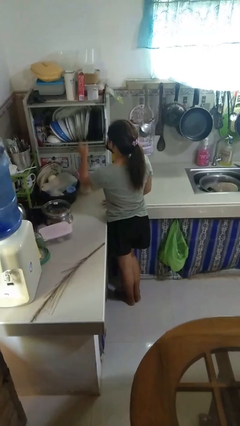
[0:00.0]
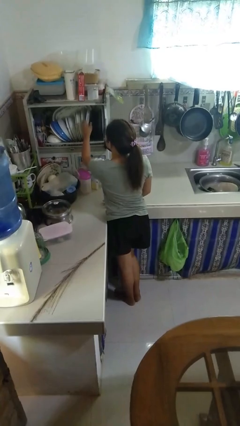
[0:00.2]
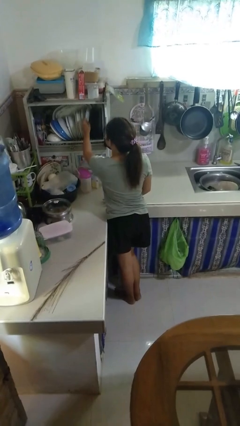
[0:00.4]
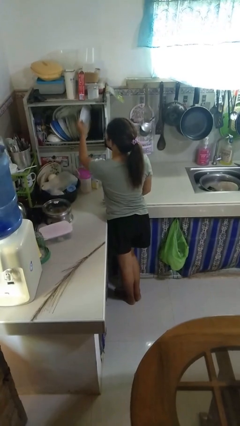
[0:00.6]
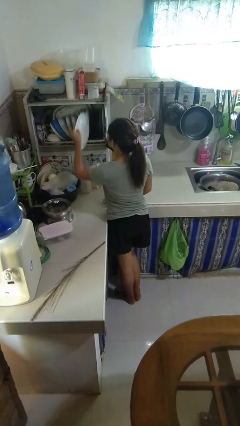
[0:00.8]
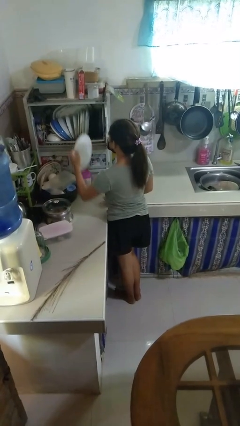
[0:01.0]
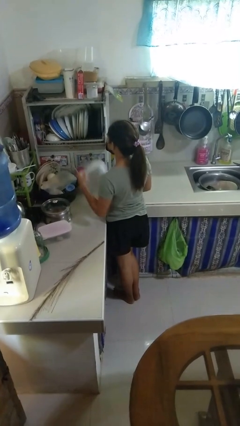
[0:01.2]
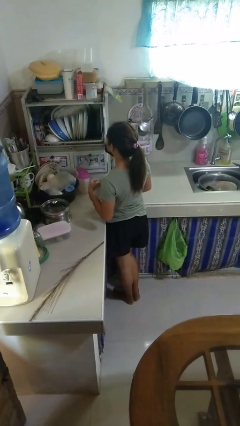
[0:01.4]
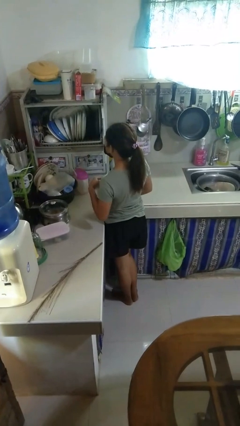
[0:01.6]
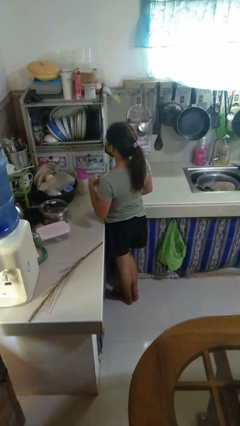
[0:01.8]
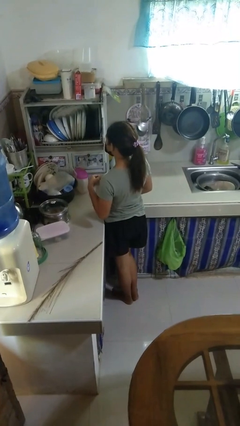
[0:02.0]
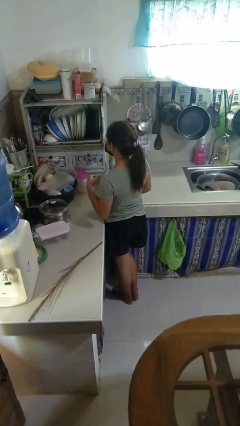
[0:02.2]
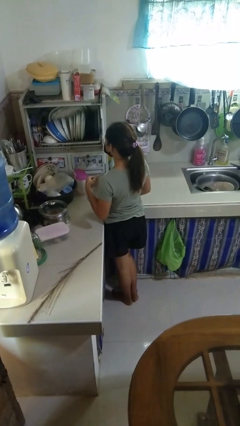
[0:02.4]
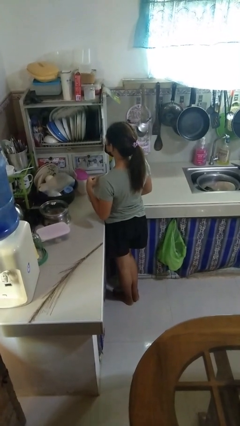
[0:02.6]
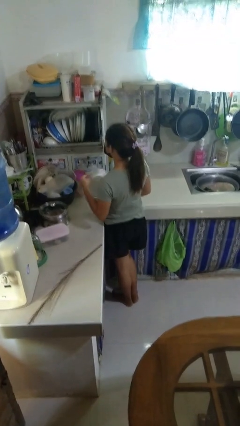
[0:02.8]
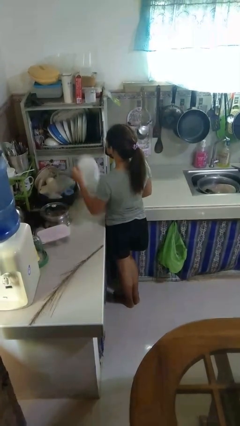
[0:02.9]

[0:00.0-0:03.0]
person takes object from kitchen drawer

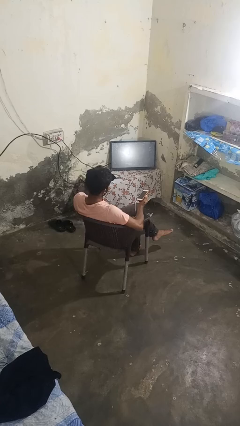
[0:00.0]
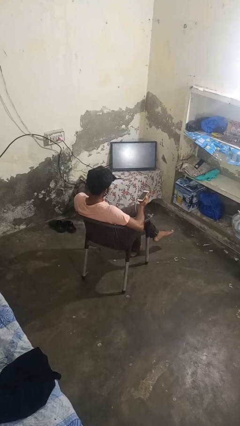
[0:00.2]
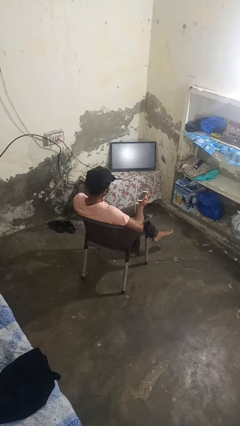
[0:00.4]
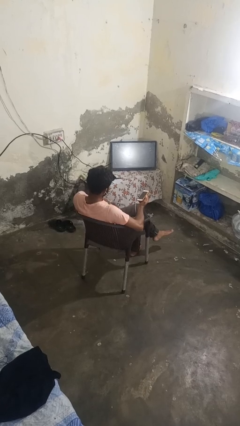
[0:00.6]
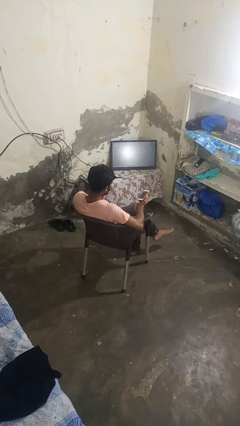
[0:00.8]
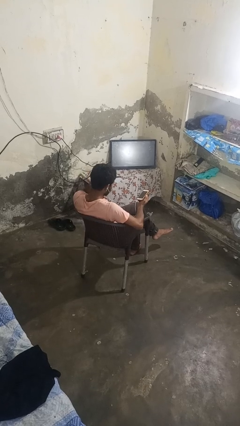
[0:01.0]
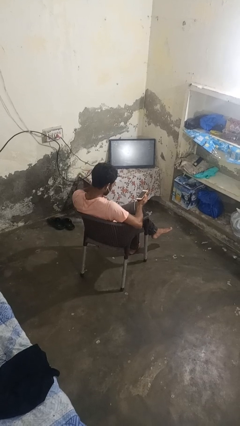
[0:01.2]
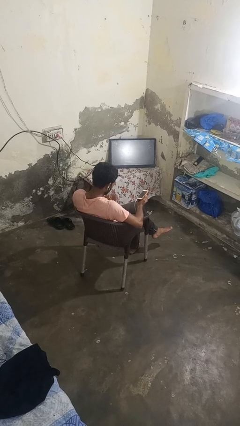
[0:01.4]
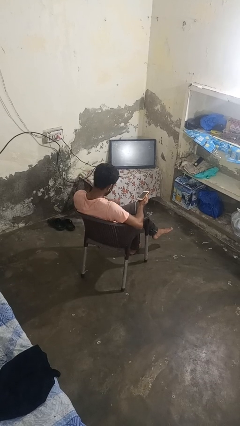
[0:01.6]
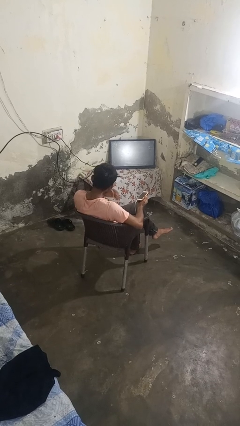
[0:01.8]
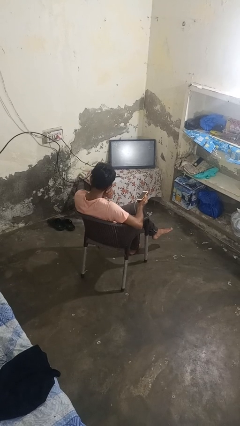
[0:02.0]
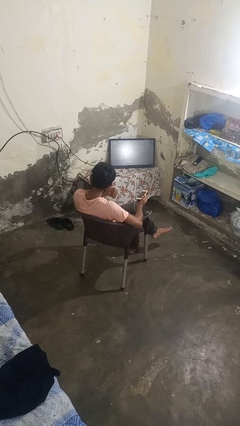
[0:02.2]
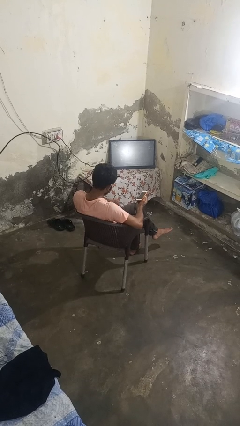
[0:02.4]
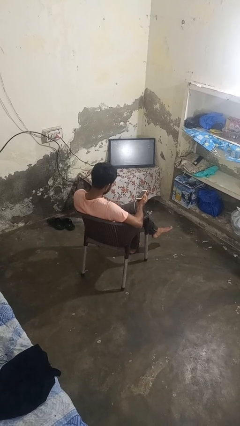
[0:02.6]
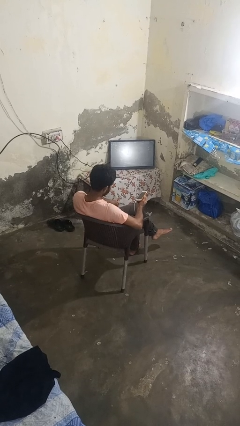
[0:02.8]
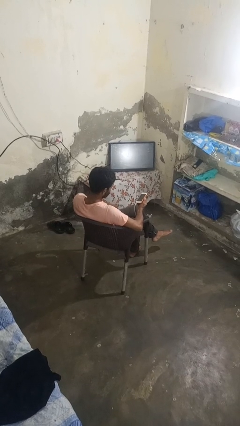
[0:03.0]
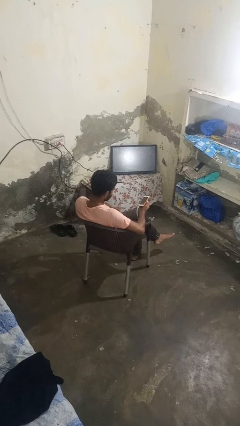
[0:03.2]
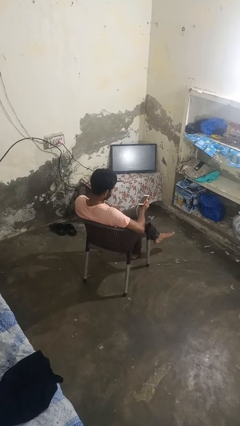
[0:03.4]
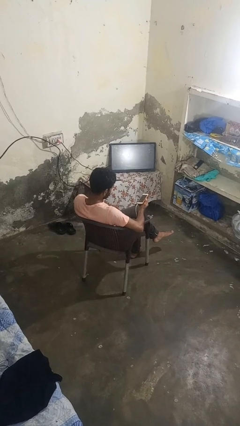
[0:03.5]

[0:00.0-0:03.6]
person takes off headphones

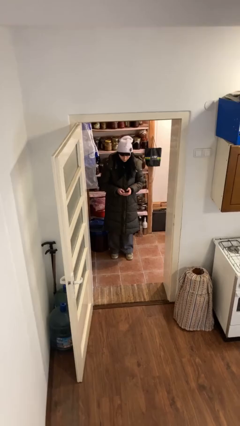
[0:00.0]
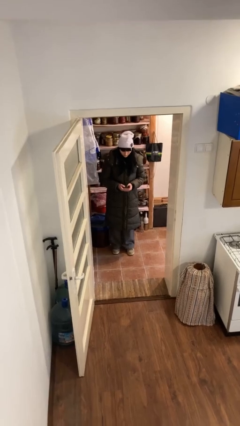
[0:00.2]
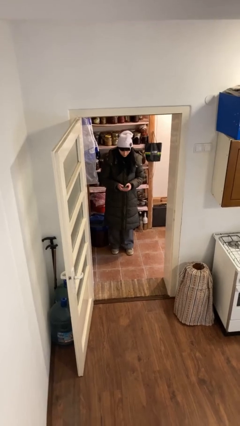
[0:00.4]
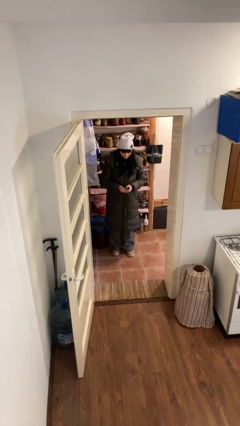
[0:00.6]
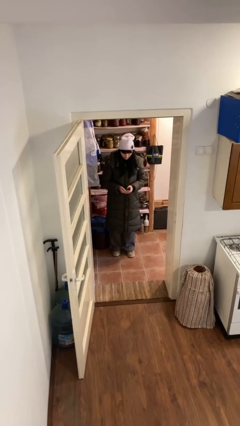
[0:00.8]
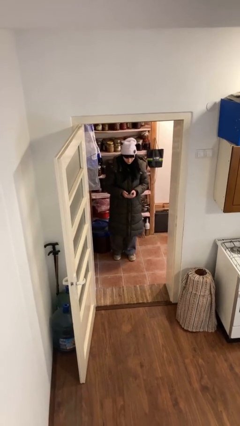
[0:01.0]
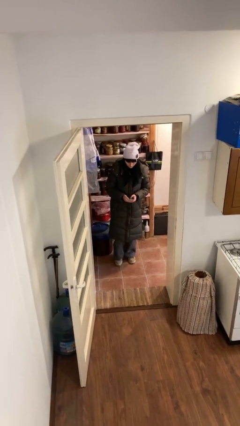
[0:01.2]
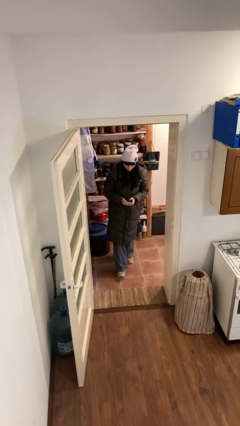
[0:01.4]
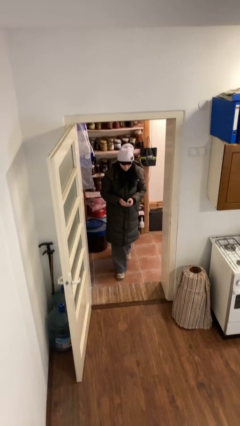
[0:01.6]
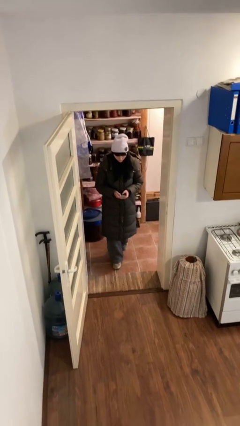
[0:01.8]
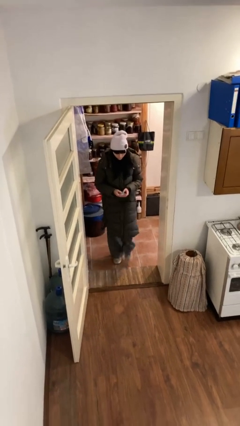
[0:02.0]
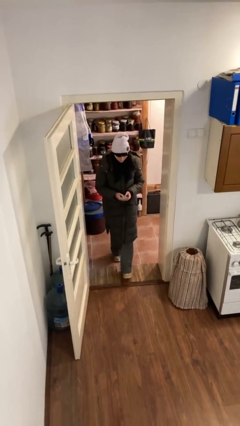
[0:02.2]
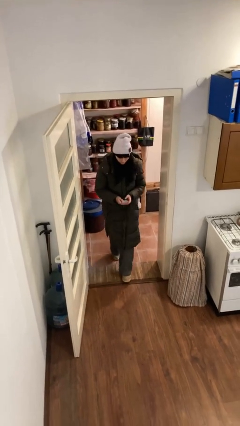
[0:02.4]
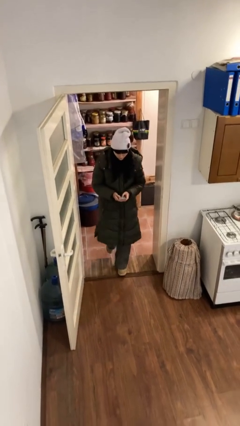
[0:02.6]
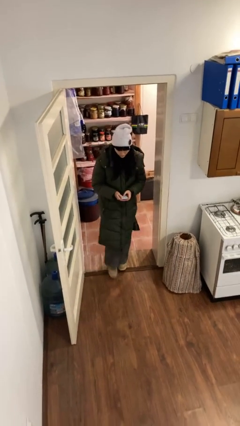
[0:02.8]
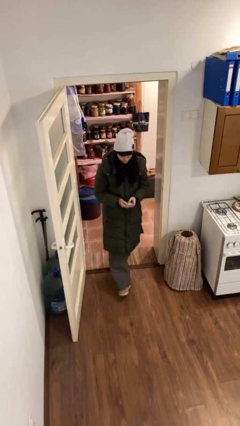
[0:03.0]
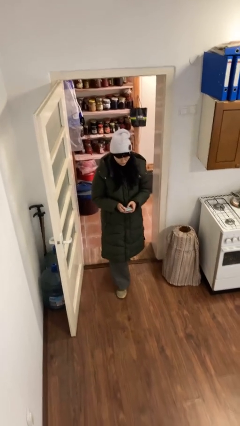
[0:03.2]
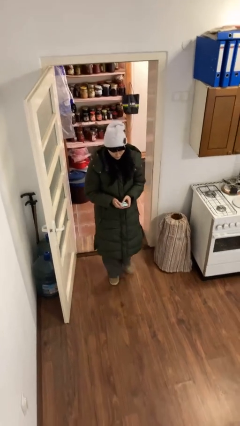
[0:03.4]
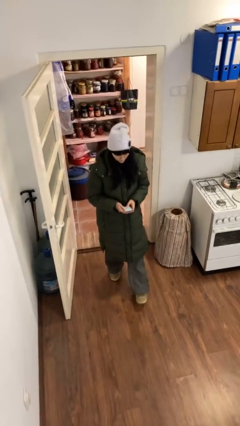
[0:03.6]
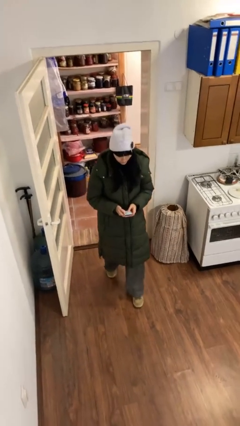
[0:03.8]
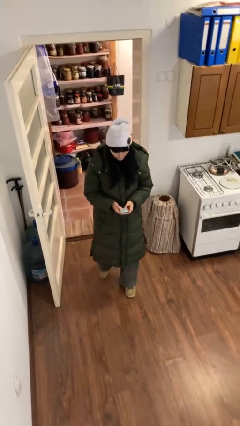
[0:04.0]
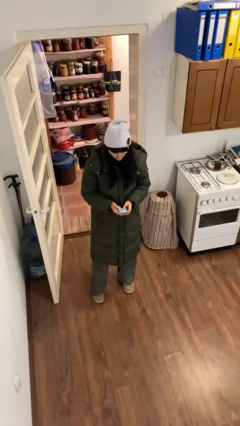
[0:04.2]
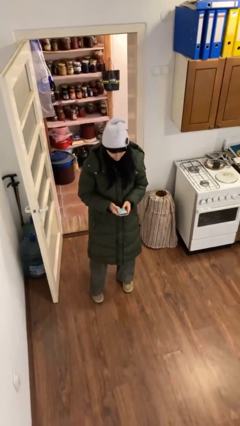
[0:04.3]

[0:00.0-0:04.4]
person enters scene through structure

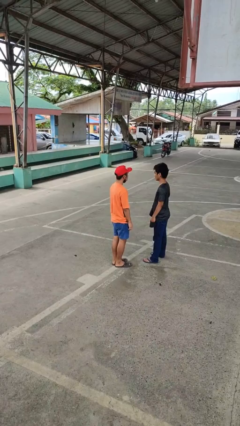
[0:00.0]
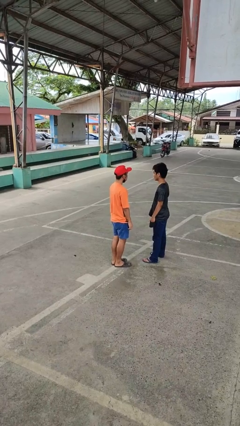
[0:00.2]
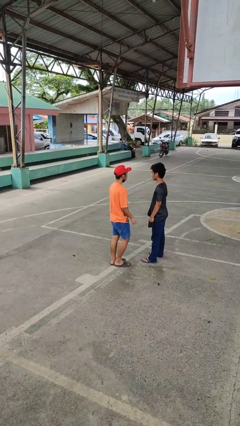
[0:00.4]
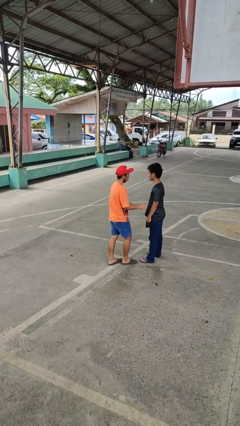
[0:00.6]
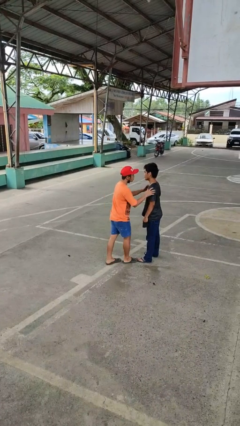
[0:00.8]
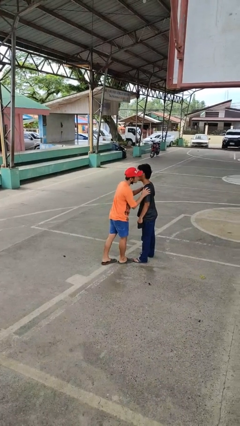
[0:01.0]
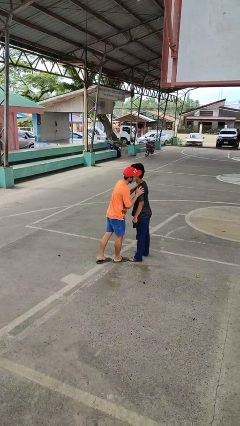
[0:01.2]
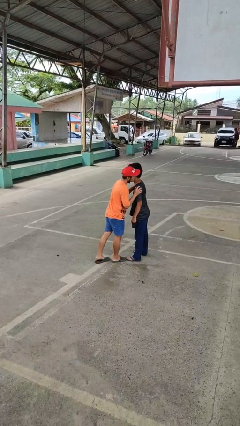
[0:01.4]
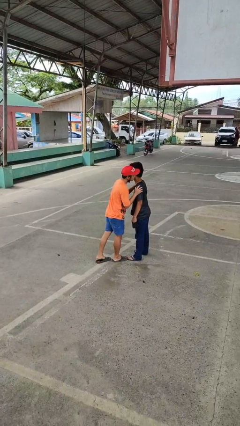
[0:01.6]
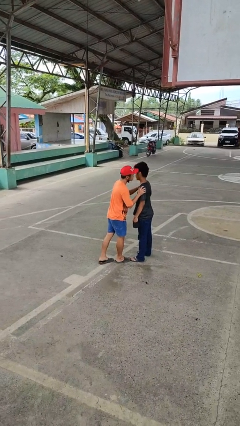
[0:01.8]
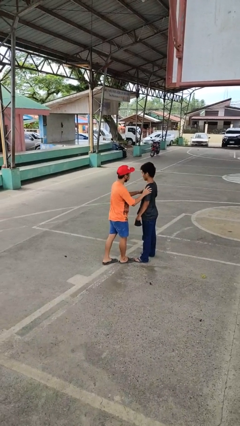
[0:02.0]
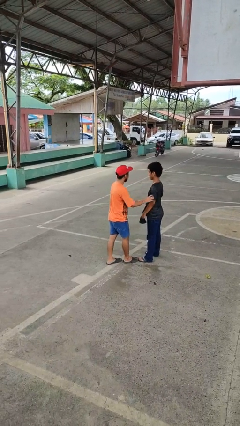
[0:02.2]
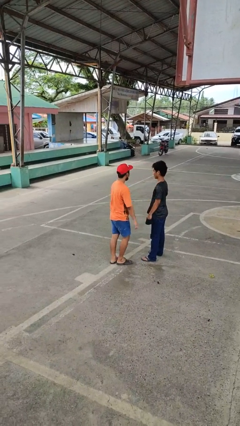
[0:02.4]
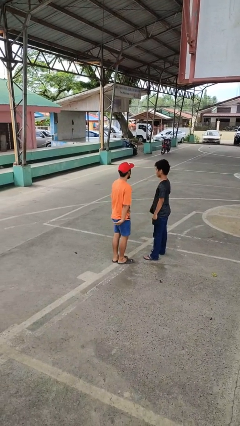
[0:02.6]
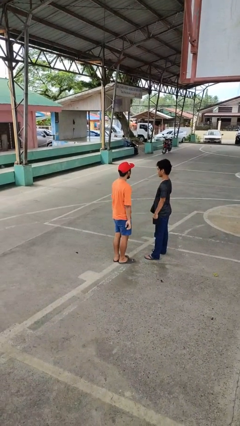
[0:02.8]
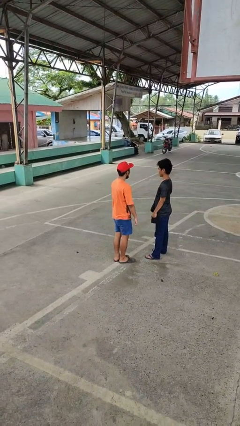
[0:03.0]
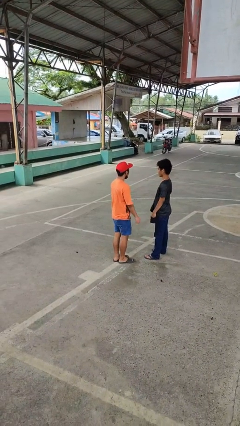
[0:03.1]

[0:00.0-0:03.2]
person kisses cheek of person

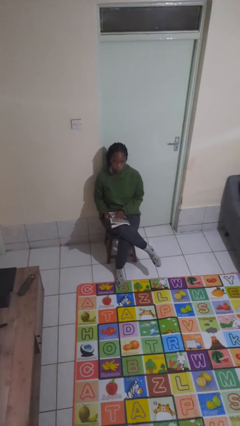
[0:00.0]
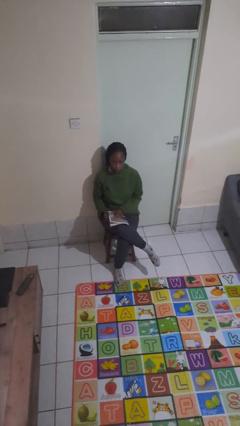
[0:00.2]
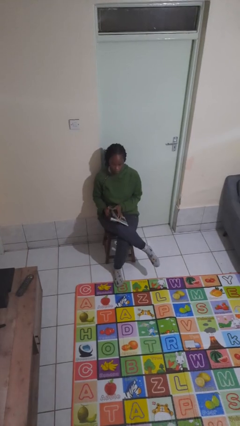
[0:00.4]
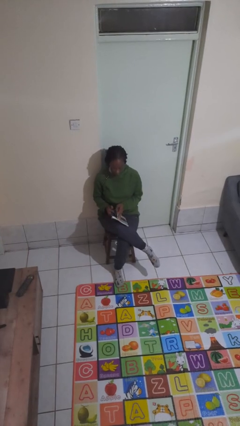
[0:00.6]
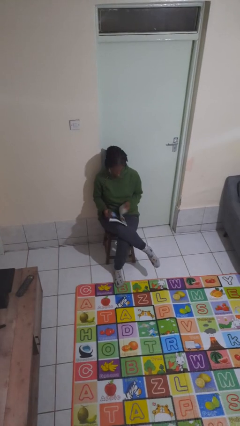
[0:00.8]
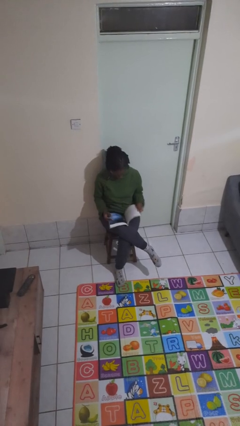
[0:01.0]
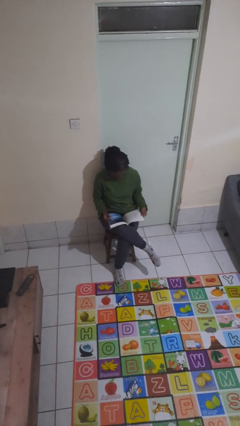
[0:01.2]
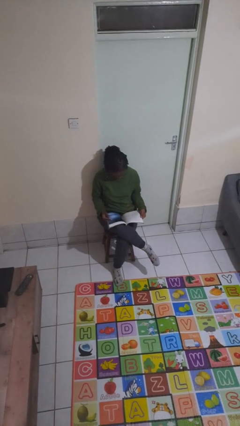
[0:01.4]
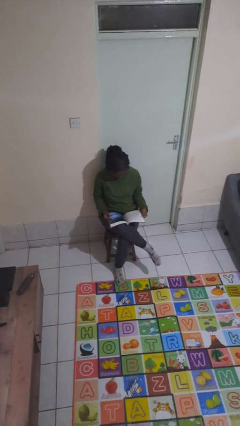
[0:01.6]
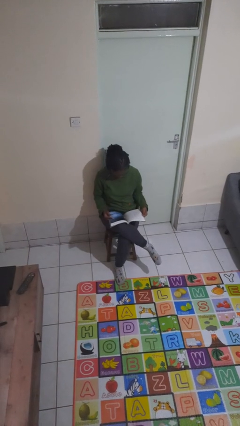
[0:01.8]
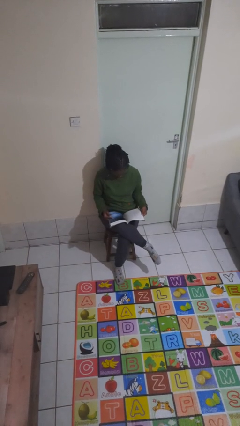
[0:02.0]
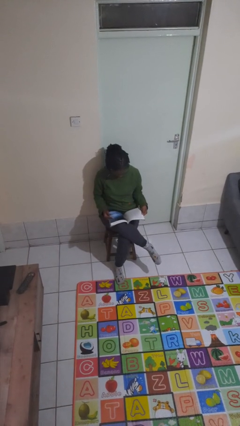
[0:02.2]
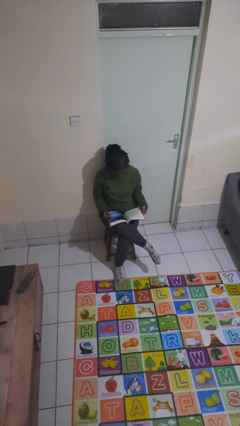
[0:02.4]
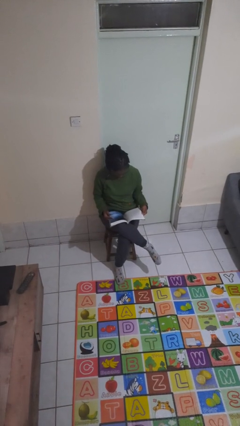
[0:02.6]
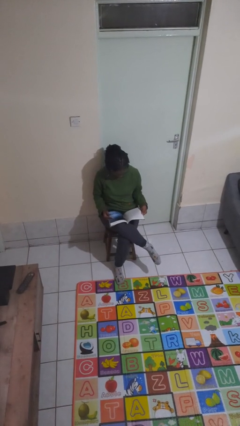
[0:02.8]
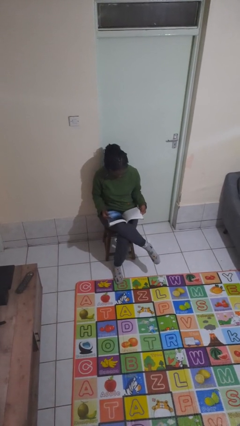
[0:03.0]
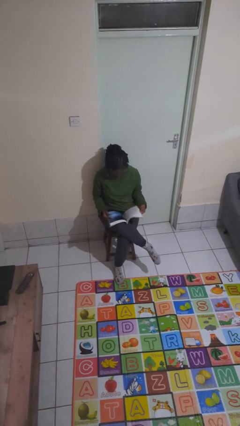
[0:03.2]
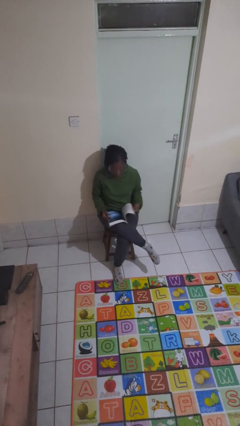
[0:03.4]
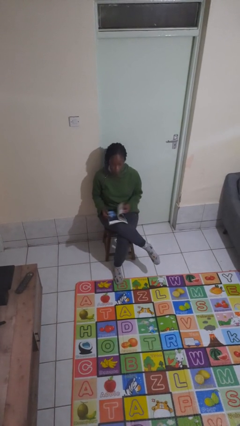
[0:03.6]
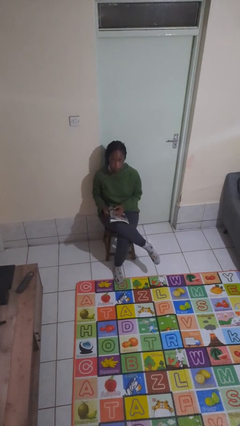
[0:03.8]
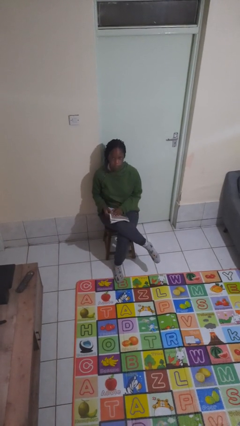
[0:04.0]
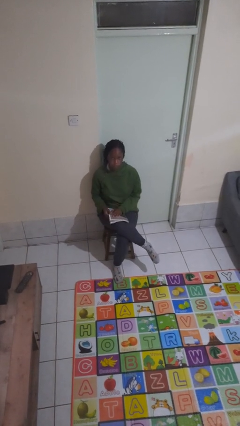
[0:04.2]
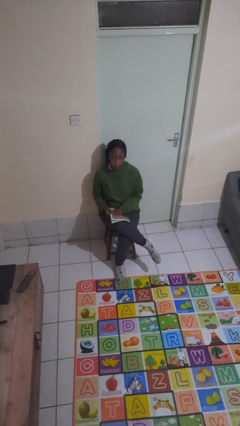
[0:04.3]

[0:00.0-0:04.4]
person reads magazine
